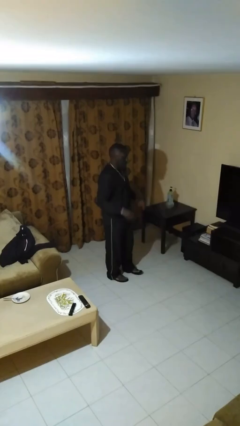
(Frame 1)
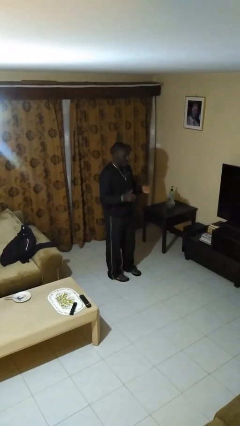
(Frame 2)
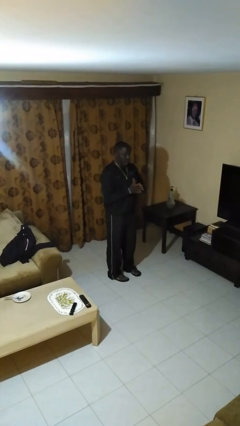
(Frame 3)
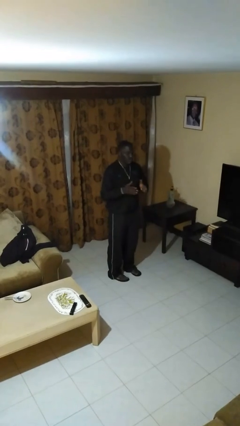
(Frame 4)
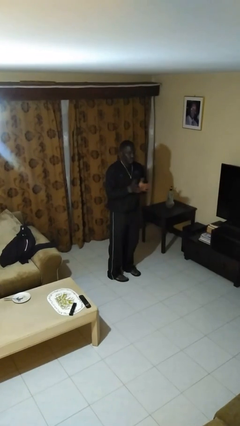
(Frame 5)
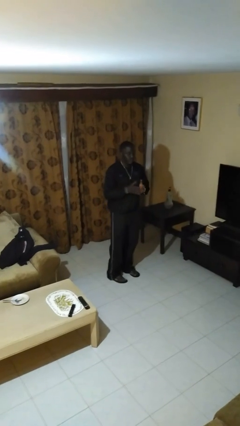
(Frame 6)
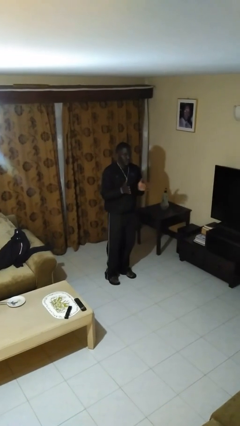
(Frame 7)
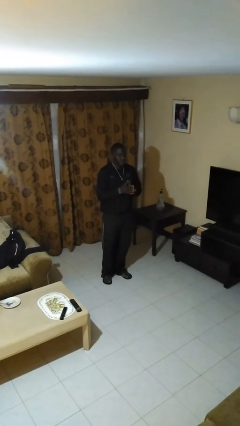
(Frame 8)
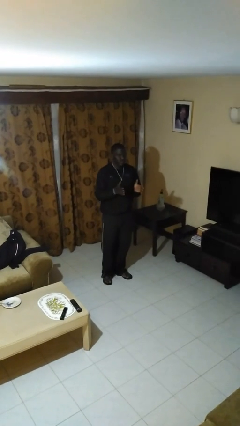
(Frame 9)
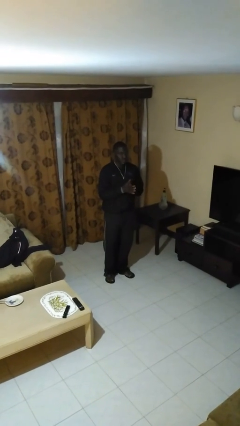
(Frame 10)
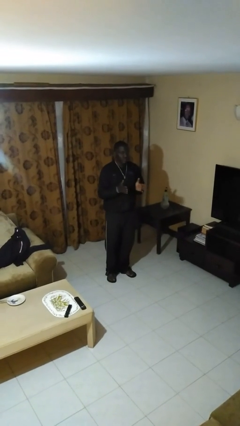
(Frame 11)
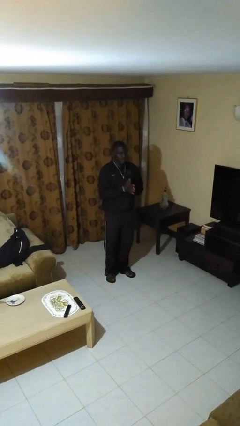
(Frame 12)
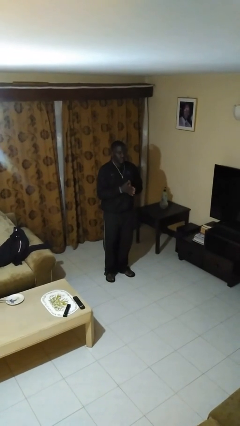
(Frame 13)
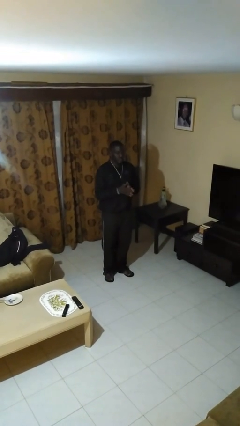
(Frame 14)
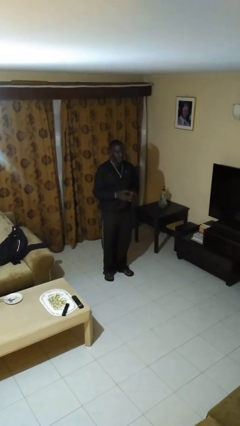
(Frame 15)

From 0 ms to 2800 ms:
person claps hands

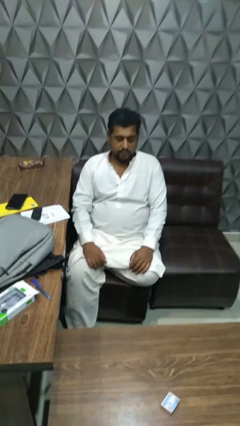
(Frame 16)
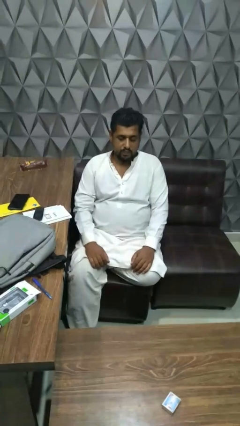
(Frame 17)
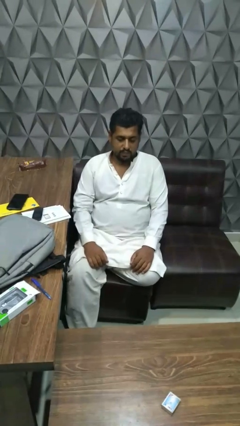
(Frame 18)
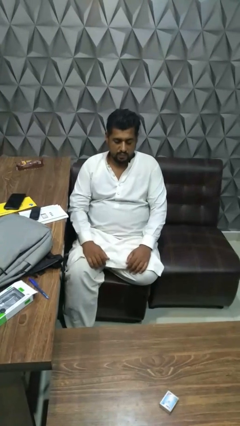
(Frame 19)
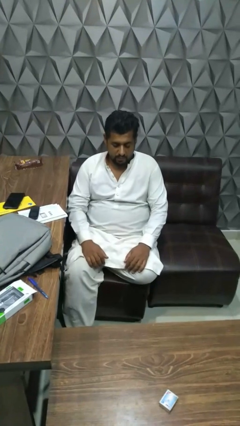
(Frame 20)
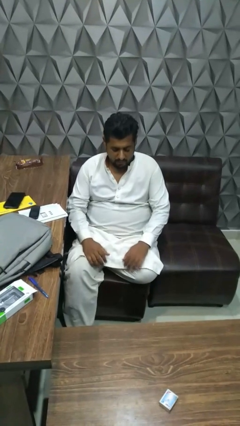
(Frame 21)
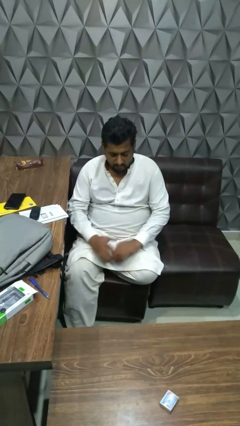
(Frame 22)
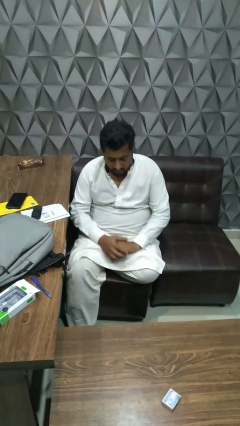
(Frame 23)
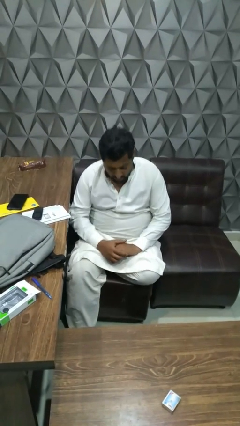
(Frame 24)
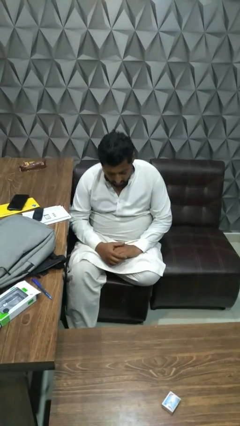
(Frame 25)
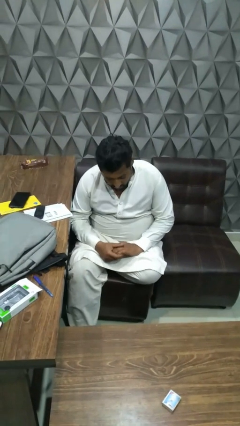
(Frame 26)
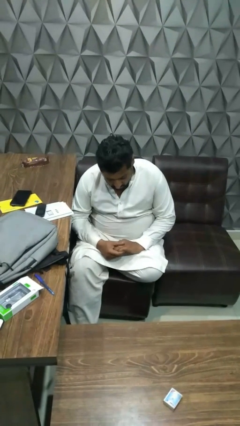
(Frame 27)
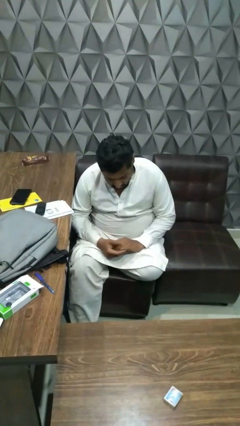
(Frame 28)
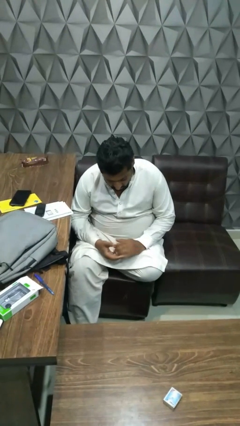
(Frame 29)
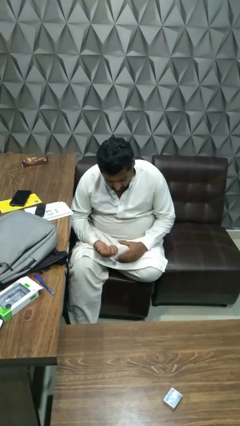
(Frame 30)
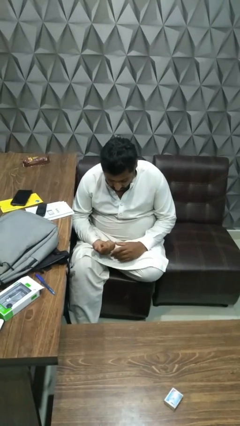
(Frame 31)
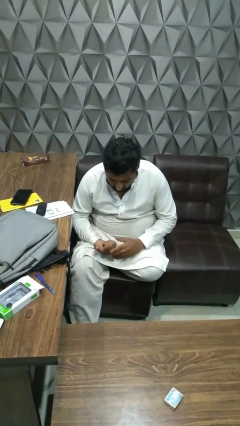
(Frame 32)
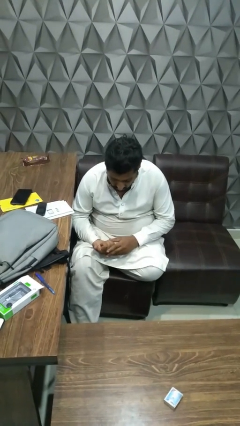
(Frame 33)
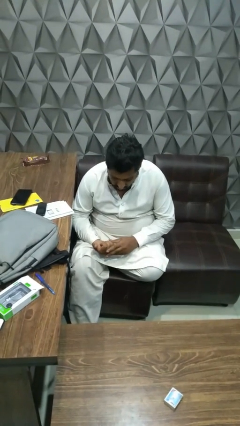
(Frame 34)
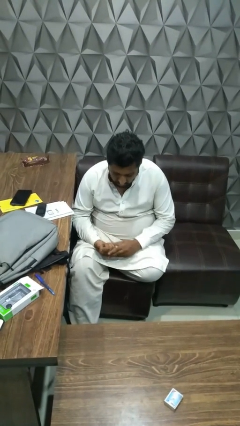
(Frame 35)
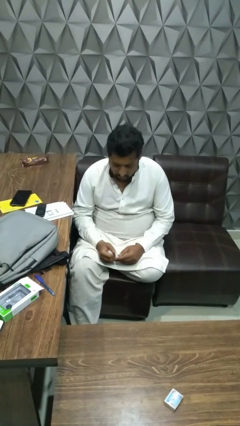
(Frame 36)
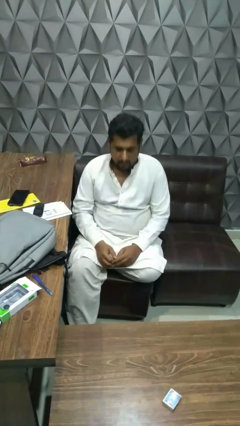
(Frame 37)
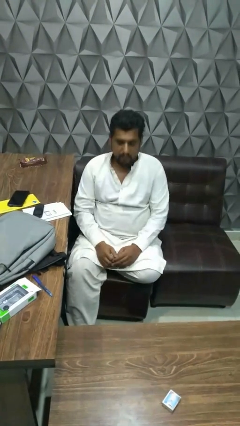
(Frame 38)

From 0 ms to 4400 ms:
person looks at hands in lap

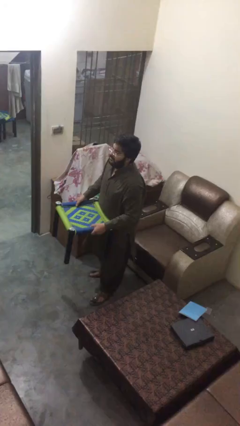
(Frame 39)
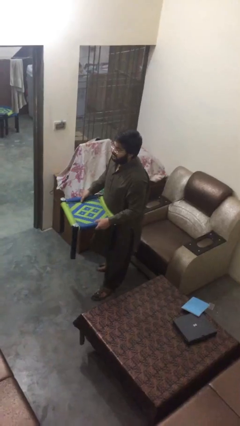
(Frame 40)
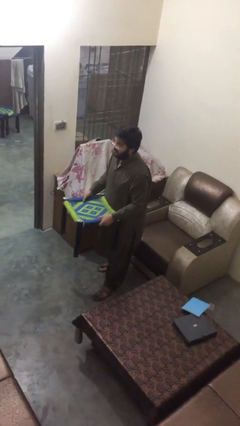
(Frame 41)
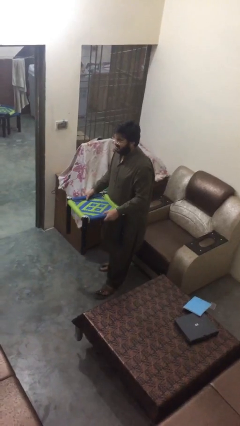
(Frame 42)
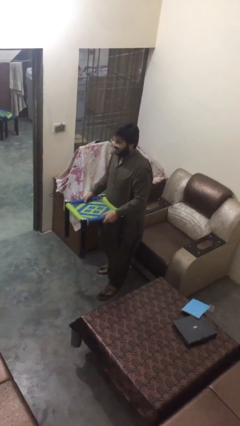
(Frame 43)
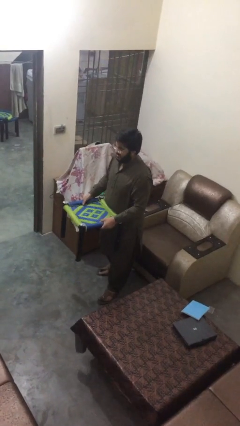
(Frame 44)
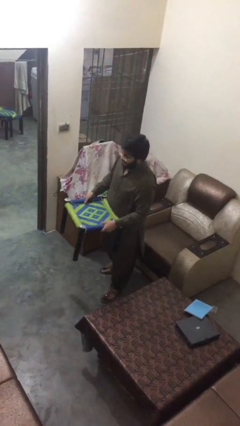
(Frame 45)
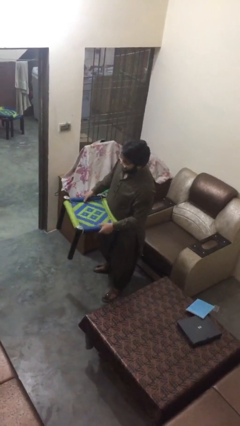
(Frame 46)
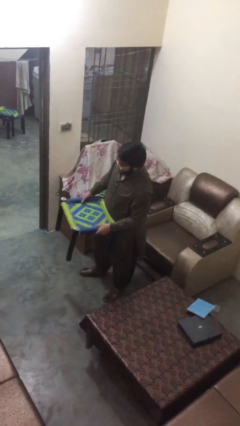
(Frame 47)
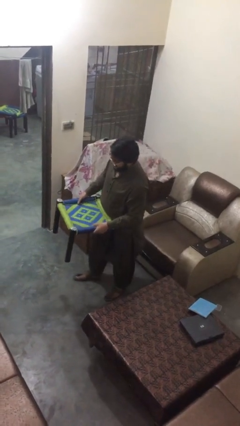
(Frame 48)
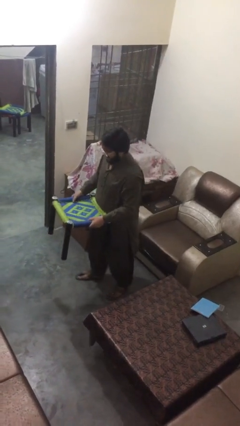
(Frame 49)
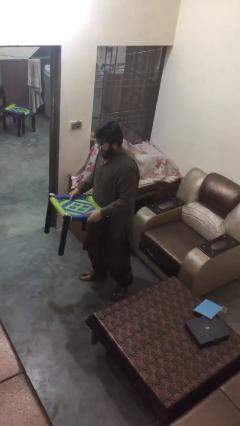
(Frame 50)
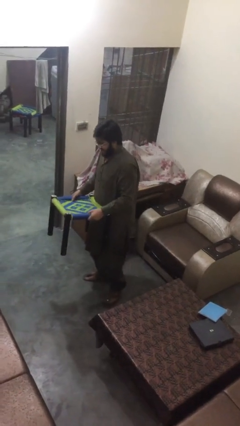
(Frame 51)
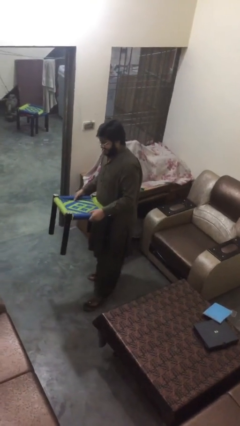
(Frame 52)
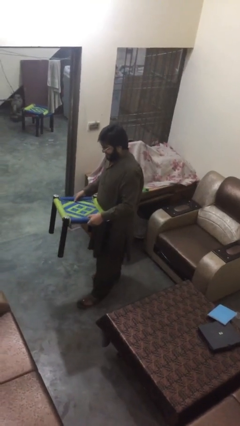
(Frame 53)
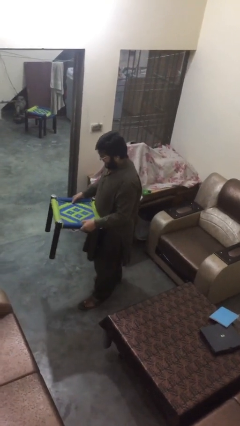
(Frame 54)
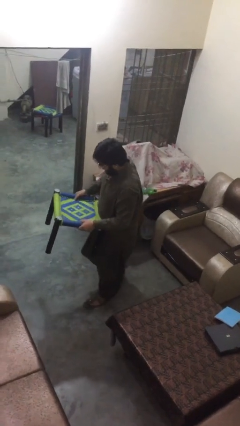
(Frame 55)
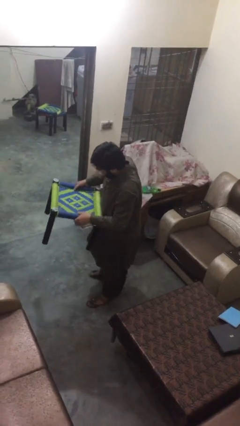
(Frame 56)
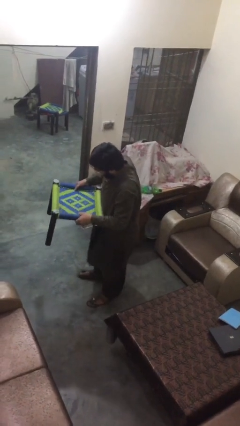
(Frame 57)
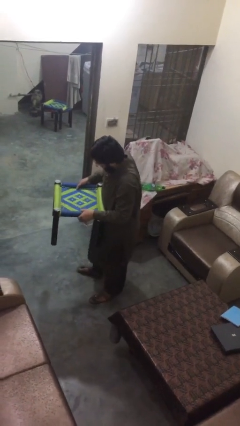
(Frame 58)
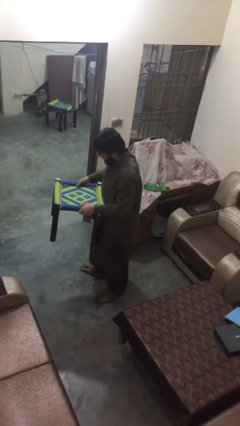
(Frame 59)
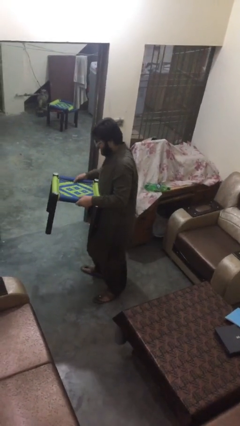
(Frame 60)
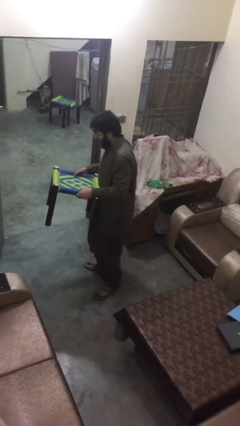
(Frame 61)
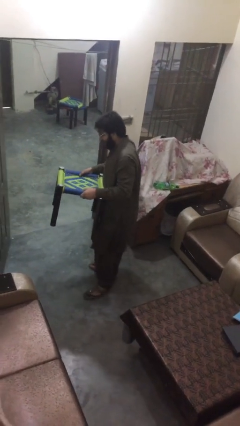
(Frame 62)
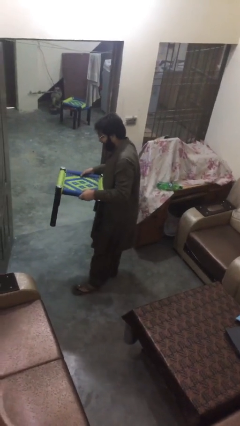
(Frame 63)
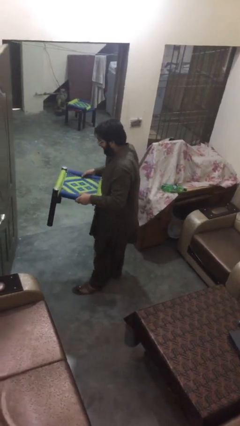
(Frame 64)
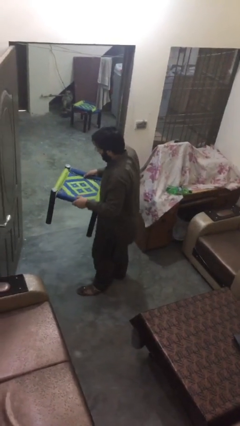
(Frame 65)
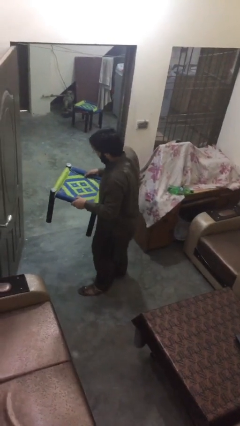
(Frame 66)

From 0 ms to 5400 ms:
person carries heavy object

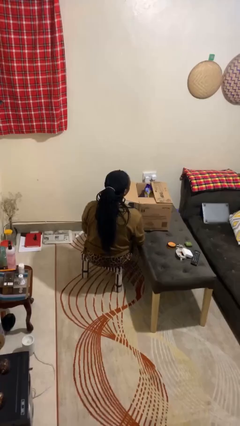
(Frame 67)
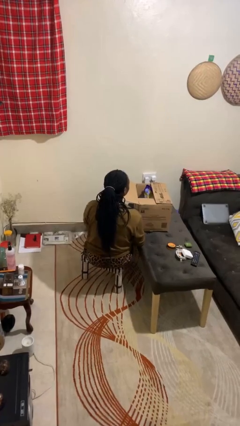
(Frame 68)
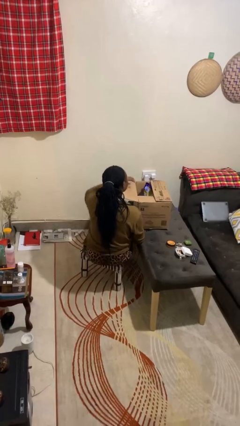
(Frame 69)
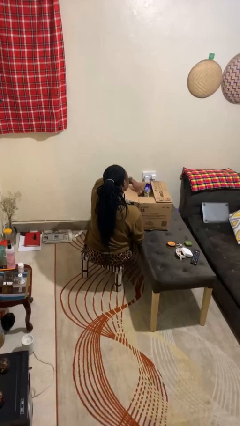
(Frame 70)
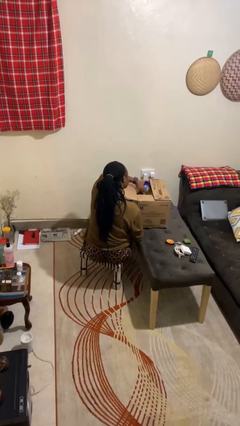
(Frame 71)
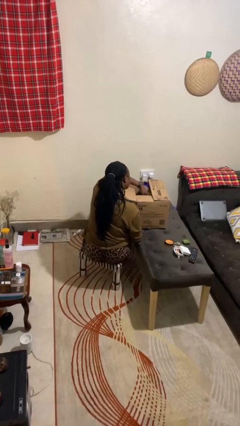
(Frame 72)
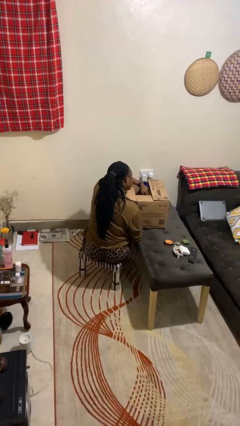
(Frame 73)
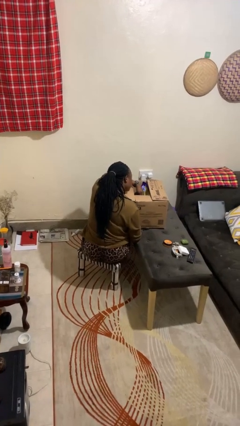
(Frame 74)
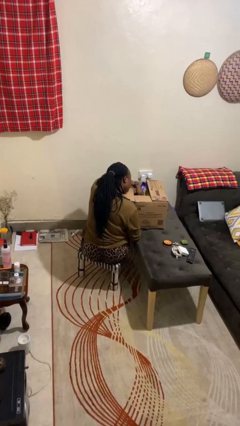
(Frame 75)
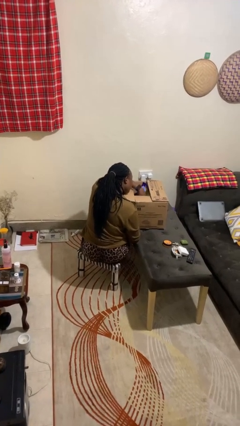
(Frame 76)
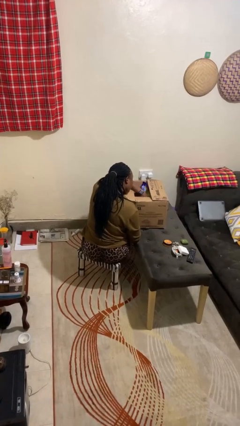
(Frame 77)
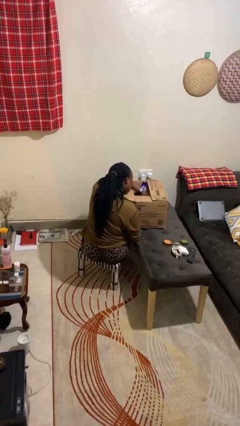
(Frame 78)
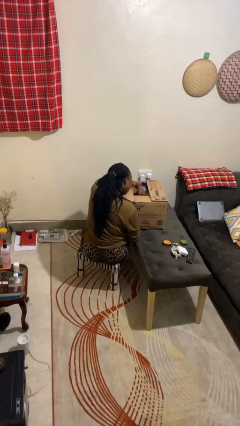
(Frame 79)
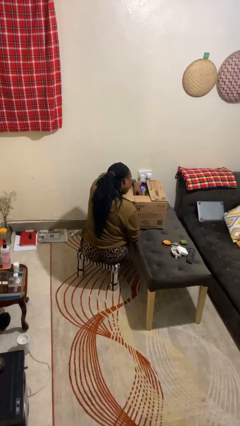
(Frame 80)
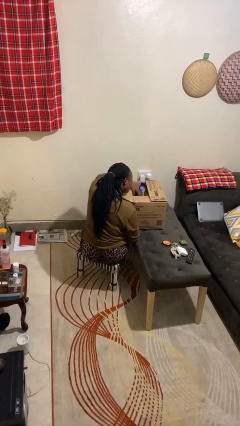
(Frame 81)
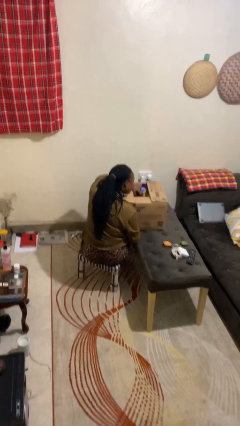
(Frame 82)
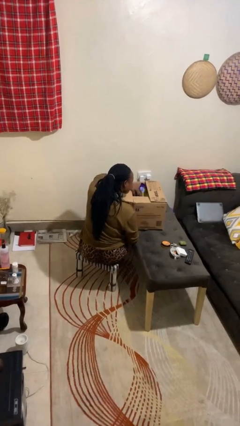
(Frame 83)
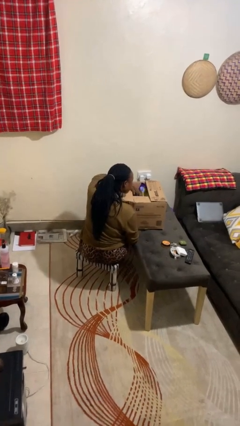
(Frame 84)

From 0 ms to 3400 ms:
person searches in box

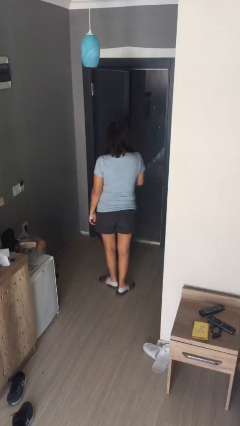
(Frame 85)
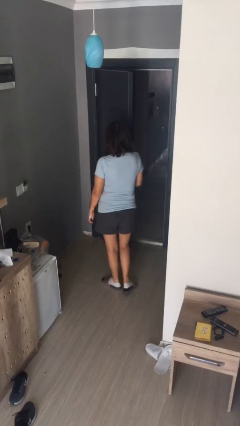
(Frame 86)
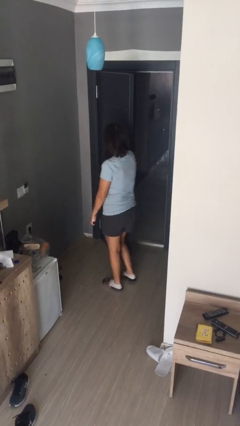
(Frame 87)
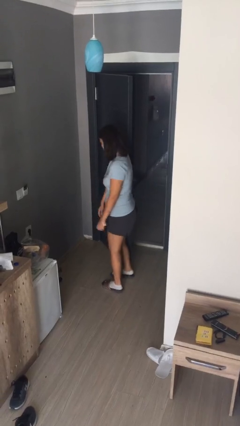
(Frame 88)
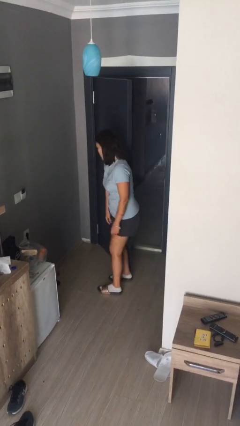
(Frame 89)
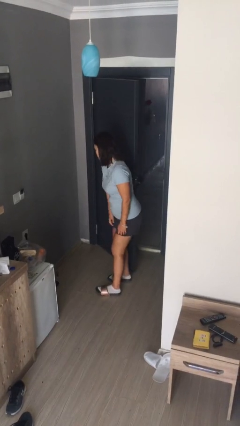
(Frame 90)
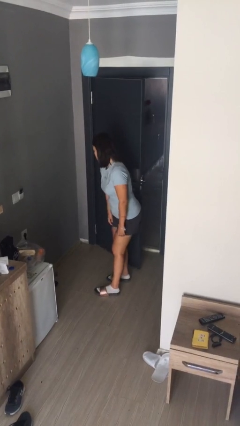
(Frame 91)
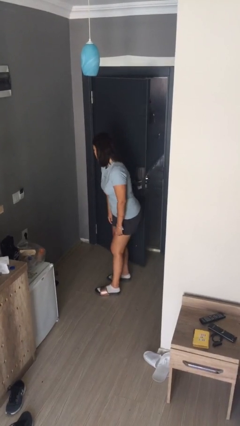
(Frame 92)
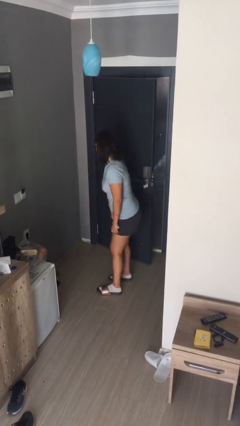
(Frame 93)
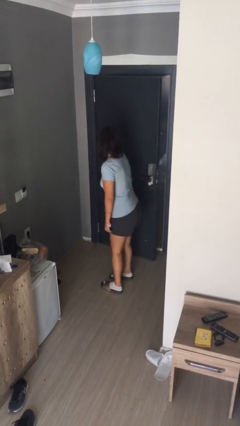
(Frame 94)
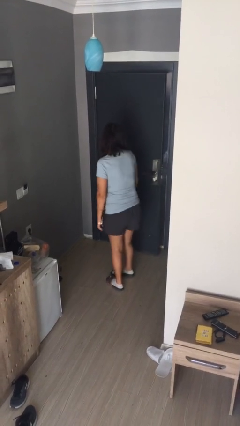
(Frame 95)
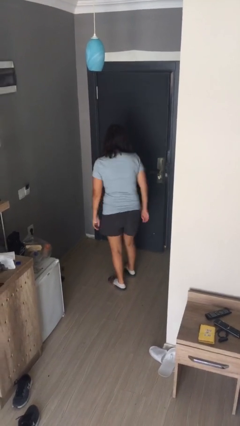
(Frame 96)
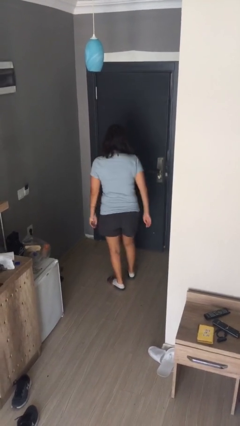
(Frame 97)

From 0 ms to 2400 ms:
person closes door with hip
